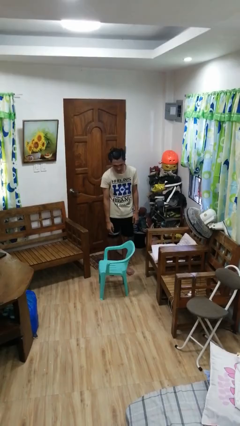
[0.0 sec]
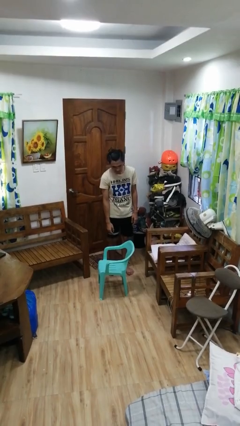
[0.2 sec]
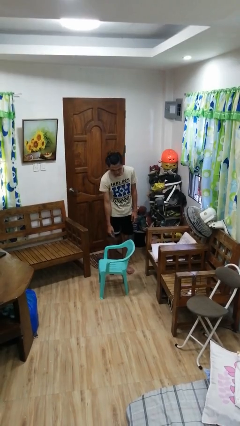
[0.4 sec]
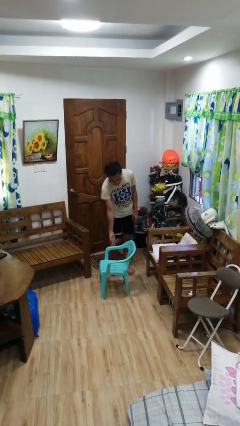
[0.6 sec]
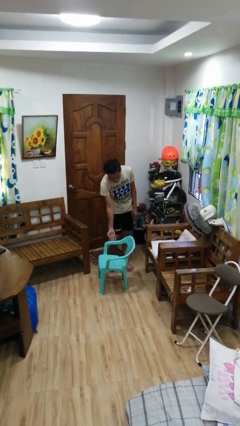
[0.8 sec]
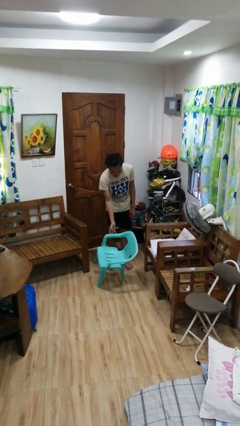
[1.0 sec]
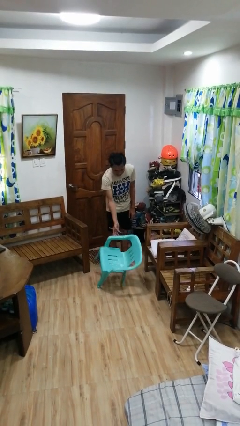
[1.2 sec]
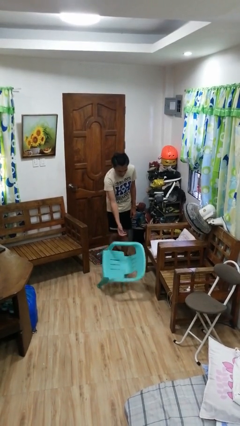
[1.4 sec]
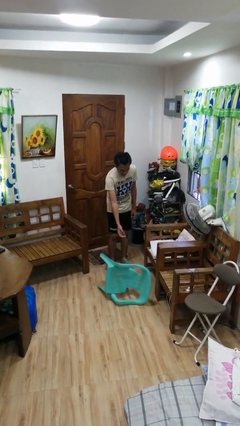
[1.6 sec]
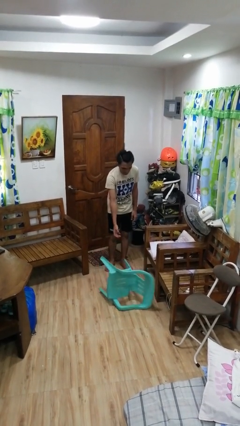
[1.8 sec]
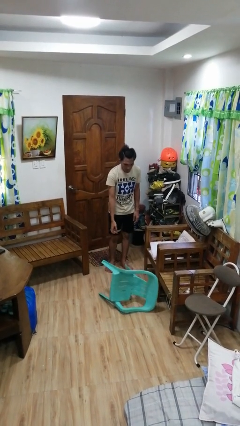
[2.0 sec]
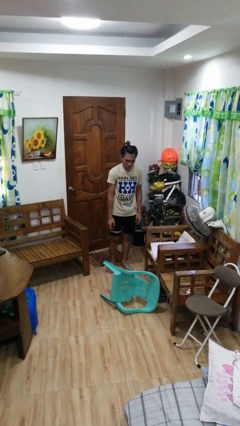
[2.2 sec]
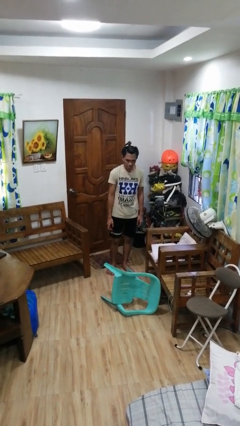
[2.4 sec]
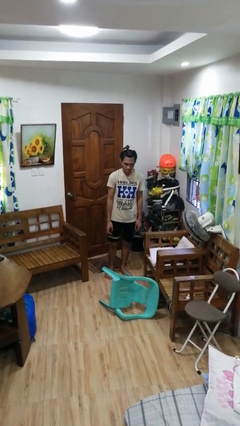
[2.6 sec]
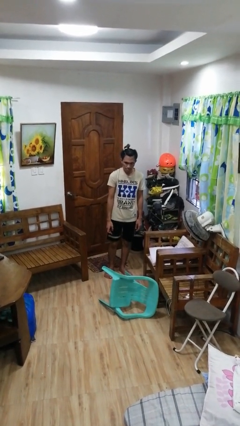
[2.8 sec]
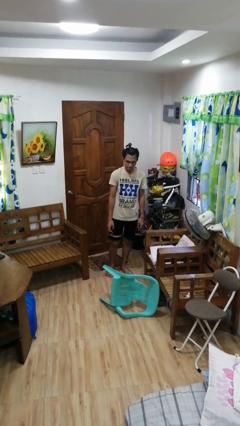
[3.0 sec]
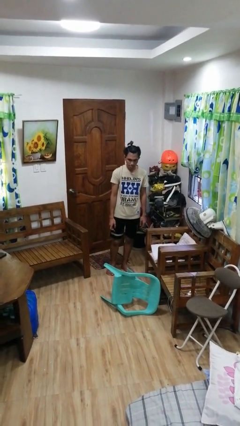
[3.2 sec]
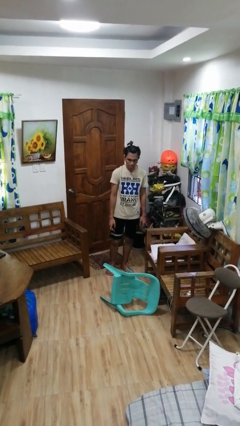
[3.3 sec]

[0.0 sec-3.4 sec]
person knocks over furniture

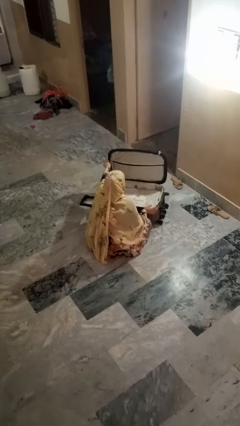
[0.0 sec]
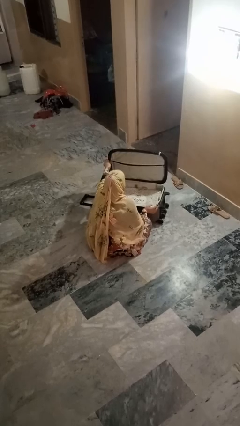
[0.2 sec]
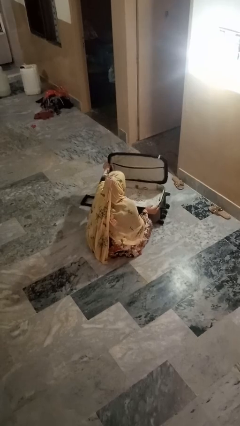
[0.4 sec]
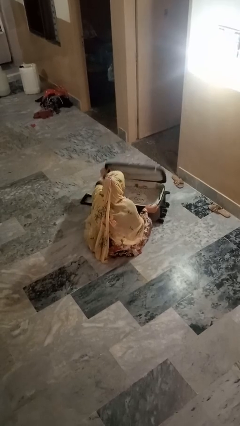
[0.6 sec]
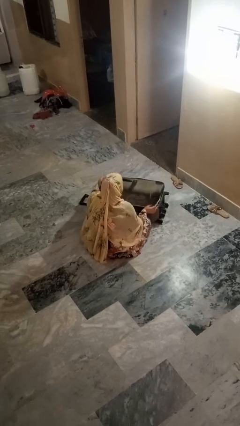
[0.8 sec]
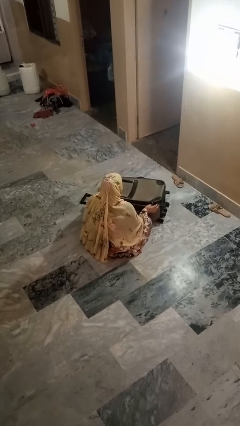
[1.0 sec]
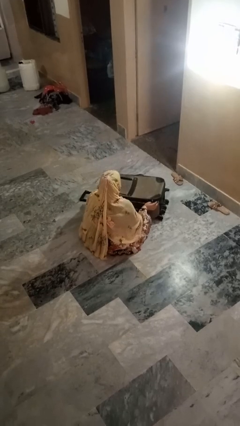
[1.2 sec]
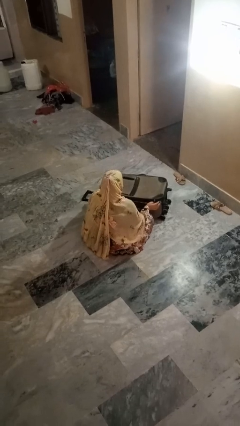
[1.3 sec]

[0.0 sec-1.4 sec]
person closes suitcase

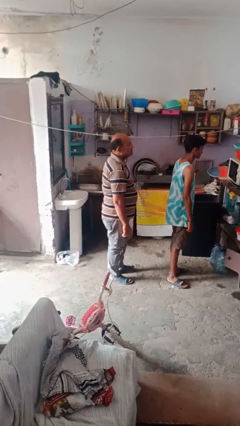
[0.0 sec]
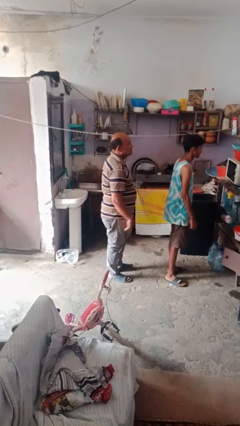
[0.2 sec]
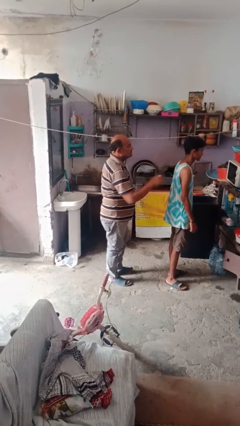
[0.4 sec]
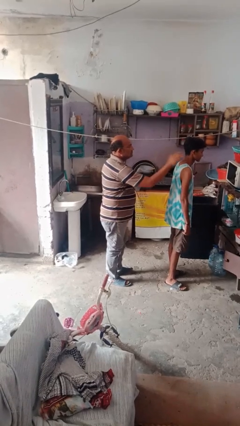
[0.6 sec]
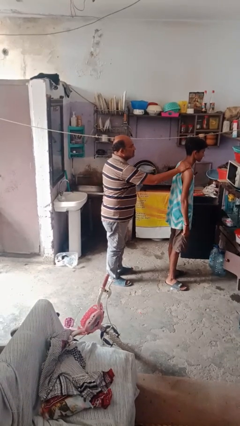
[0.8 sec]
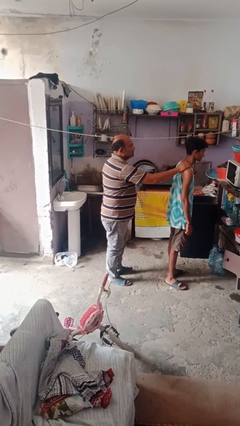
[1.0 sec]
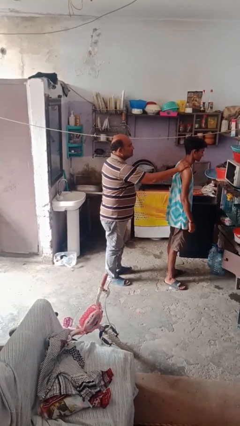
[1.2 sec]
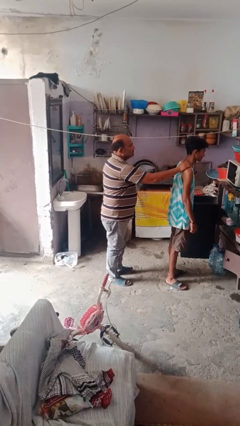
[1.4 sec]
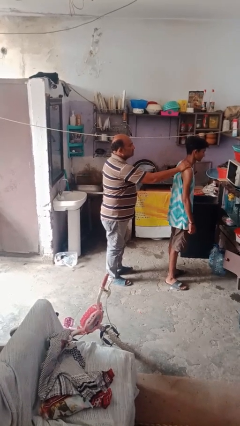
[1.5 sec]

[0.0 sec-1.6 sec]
person grabs person by shoulder

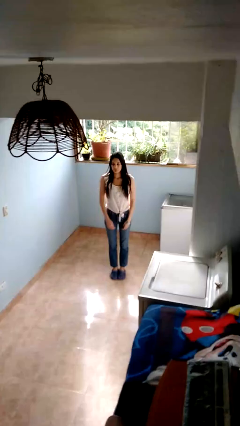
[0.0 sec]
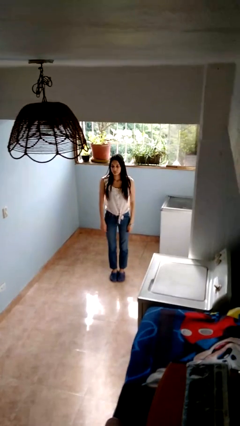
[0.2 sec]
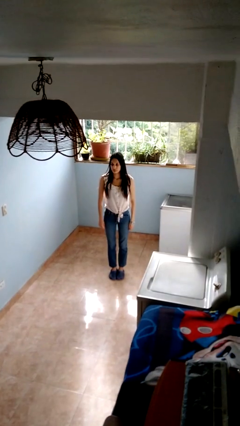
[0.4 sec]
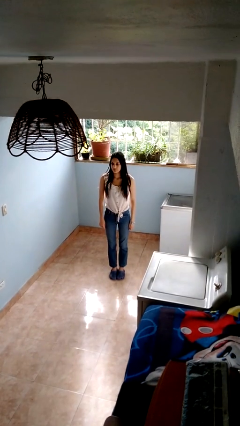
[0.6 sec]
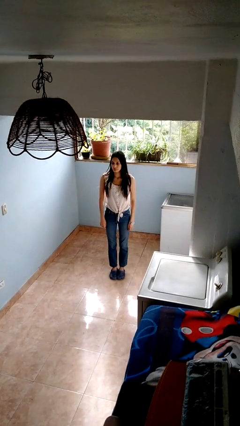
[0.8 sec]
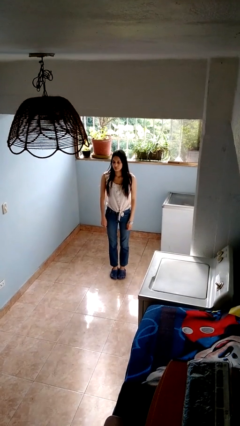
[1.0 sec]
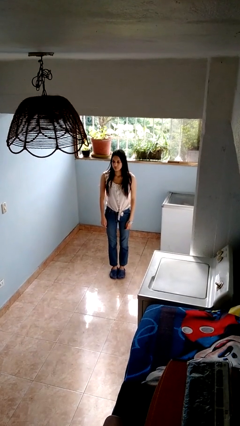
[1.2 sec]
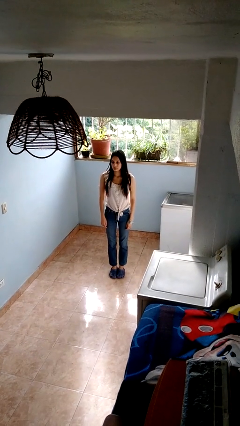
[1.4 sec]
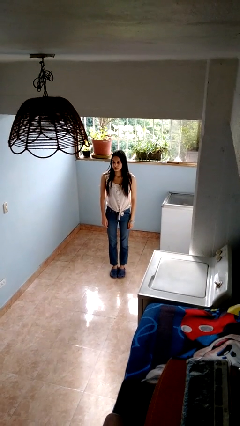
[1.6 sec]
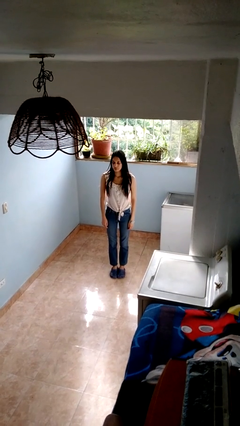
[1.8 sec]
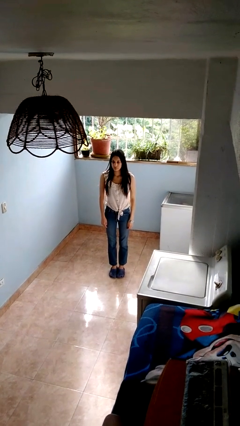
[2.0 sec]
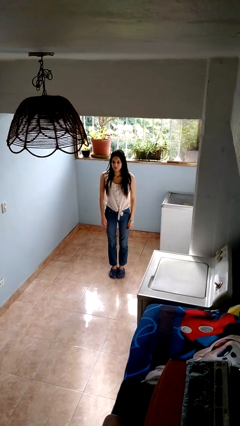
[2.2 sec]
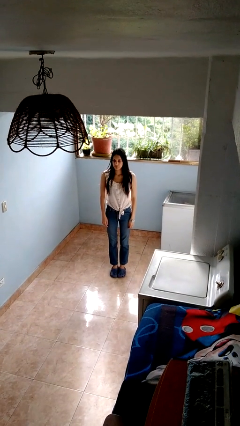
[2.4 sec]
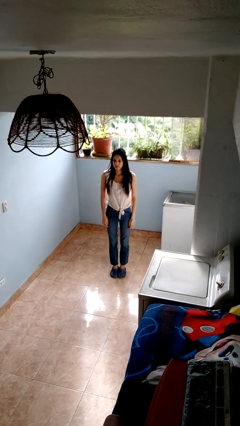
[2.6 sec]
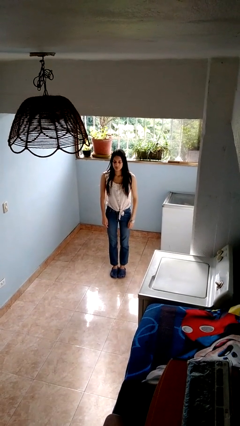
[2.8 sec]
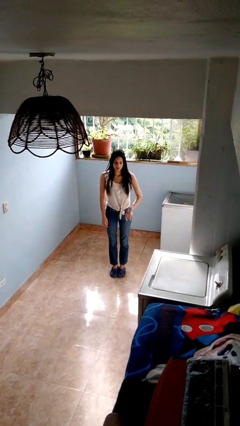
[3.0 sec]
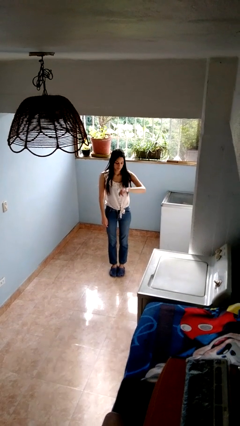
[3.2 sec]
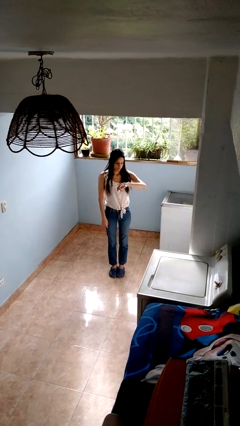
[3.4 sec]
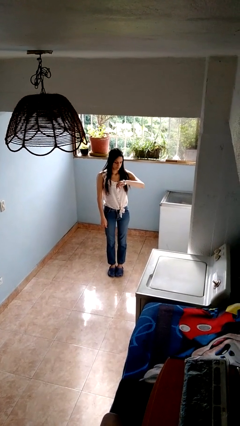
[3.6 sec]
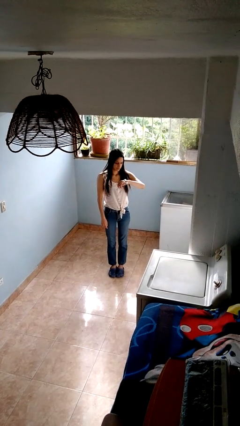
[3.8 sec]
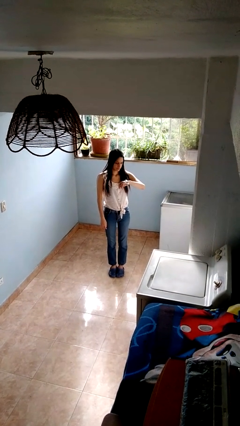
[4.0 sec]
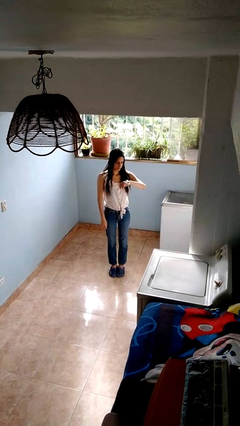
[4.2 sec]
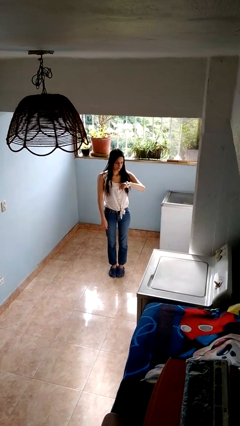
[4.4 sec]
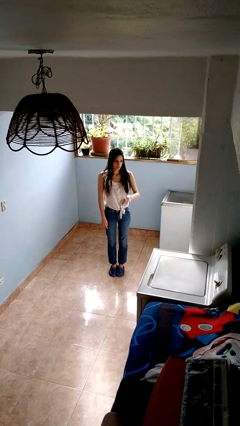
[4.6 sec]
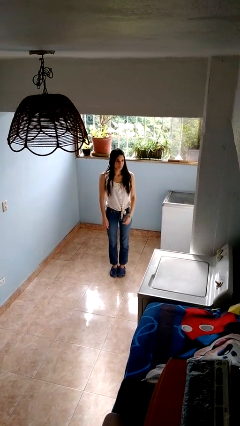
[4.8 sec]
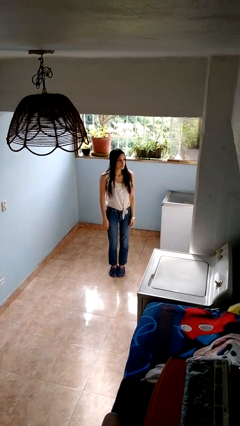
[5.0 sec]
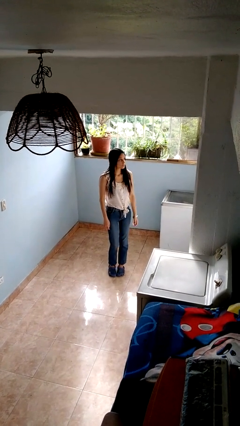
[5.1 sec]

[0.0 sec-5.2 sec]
person looks at wristwatch

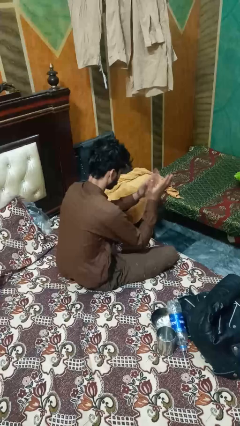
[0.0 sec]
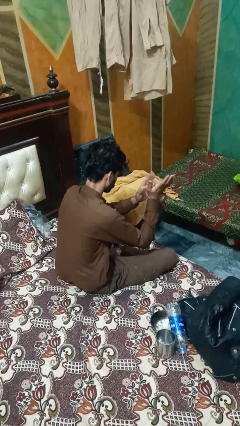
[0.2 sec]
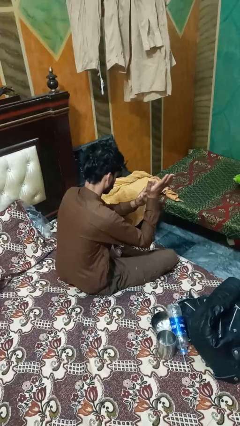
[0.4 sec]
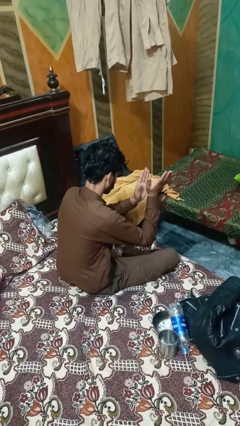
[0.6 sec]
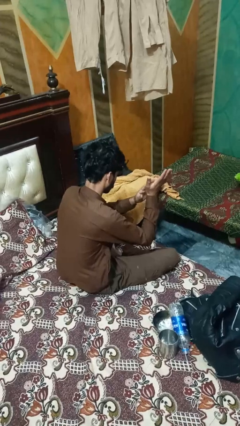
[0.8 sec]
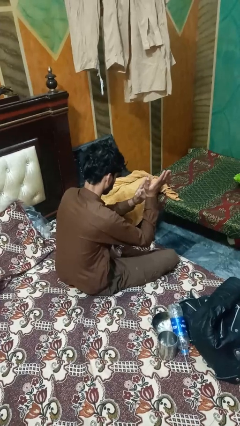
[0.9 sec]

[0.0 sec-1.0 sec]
person claps hands

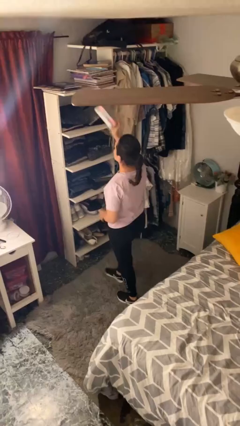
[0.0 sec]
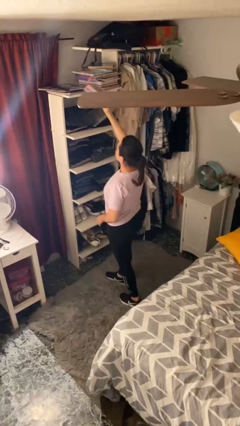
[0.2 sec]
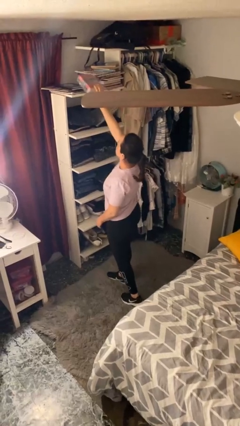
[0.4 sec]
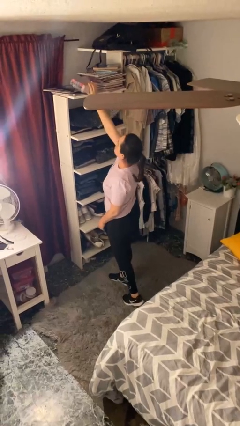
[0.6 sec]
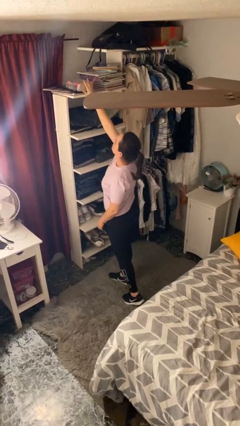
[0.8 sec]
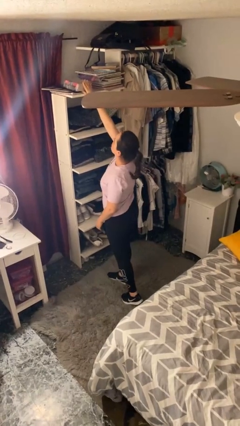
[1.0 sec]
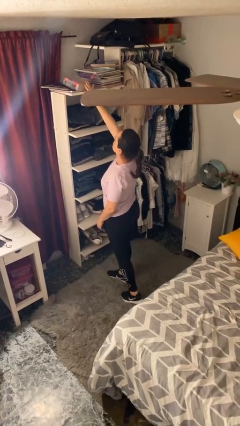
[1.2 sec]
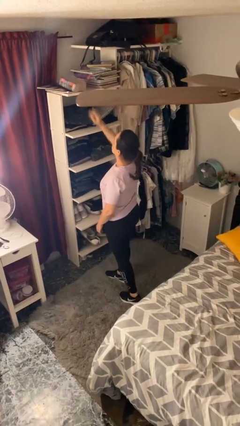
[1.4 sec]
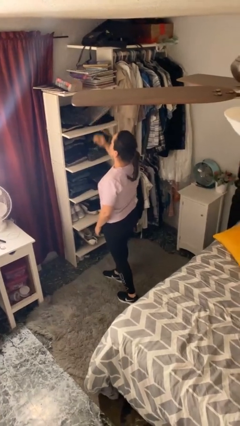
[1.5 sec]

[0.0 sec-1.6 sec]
person puts down object on shelf

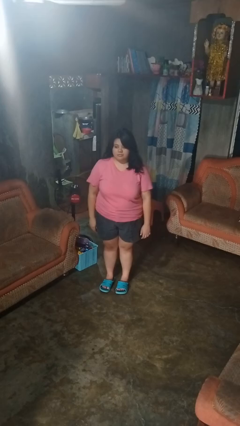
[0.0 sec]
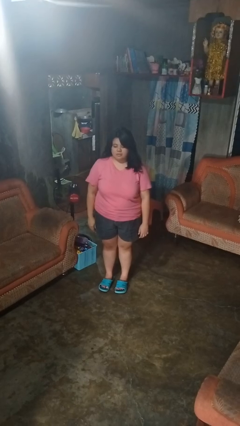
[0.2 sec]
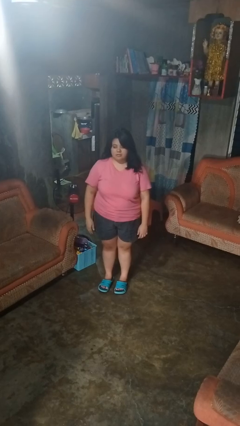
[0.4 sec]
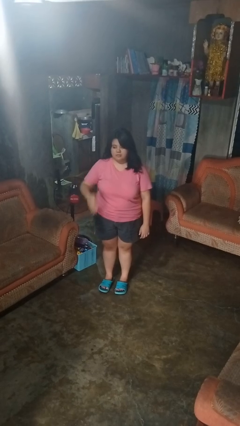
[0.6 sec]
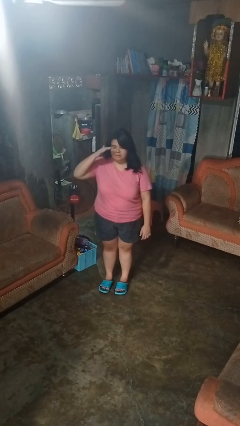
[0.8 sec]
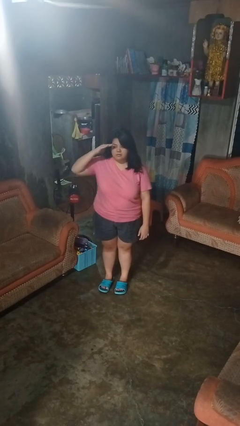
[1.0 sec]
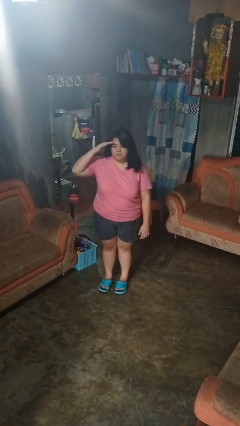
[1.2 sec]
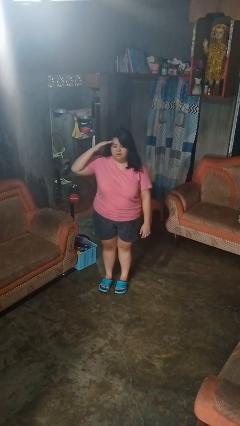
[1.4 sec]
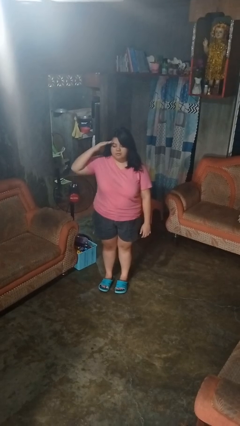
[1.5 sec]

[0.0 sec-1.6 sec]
person salutes

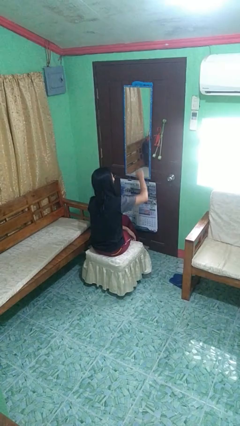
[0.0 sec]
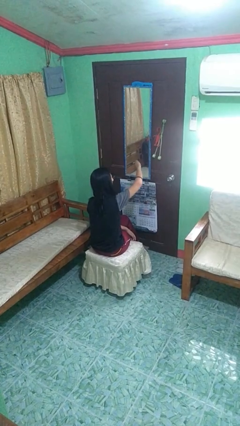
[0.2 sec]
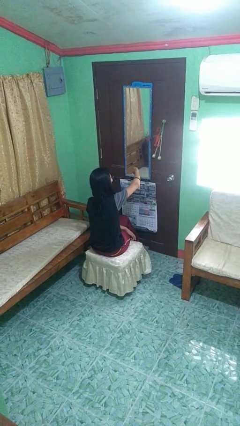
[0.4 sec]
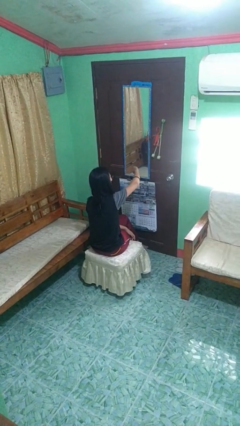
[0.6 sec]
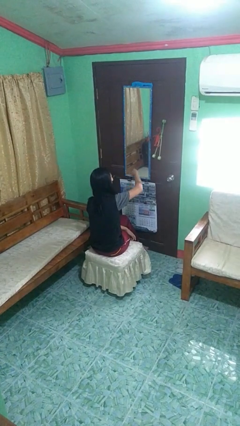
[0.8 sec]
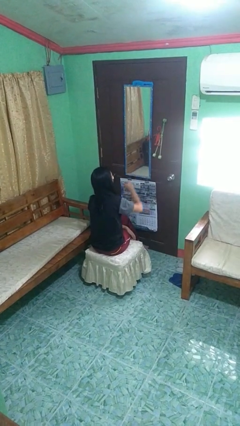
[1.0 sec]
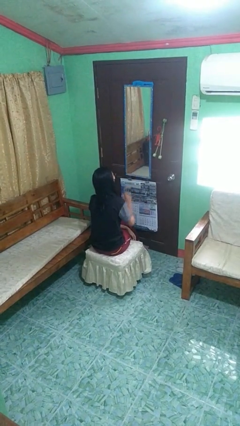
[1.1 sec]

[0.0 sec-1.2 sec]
person gestures thumbs down
